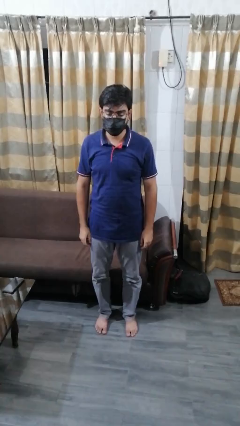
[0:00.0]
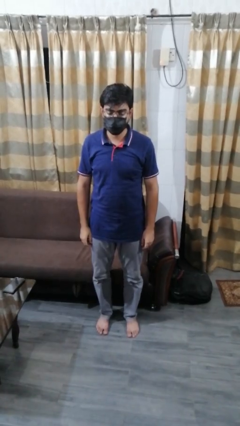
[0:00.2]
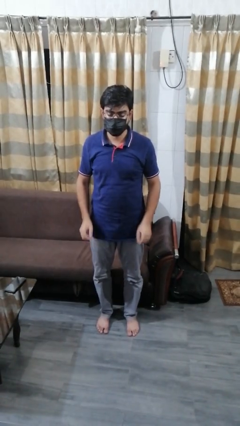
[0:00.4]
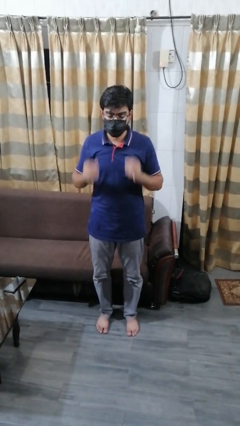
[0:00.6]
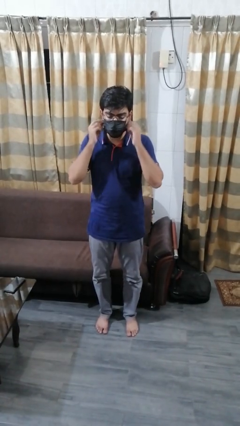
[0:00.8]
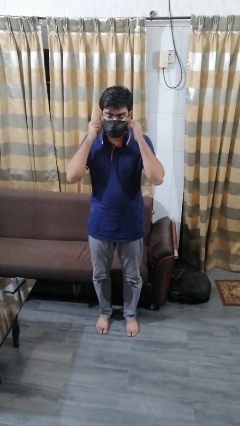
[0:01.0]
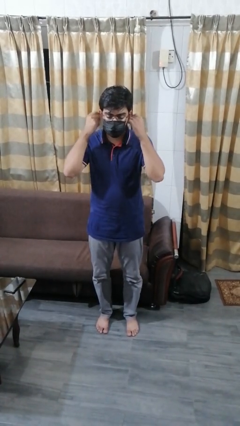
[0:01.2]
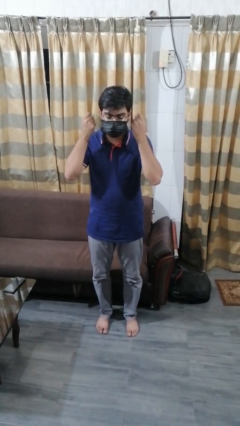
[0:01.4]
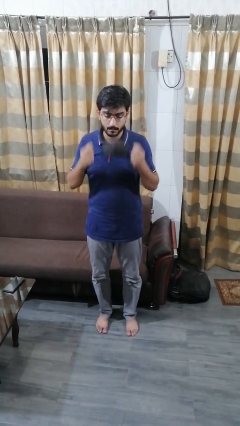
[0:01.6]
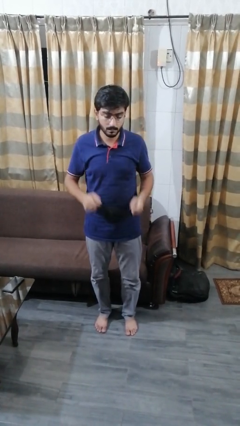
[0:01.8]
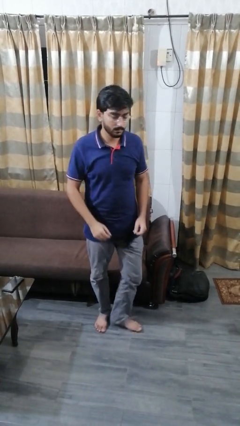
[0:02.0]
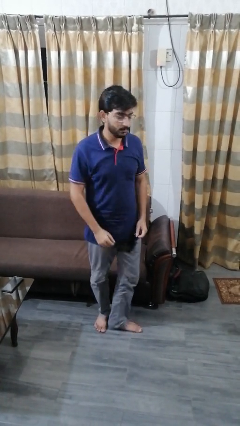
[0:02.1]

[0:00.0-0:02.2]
person takes off facemask

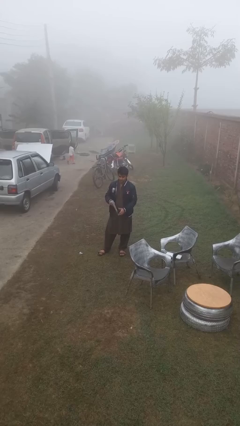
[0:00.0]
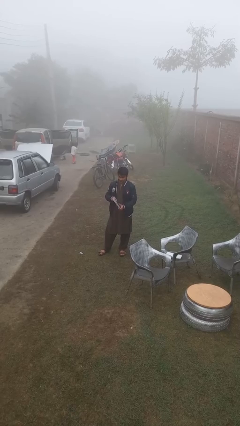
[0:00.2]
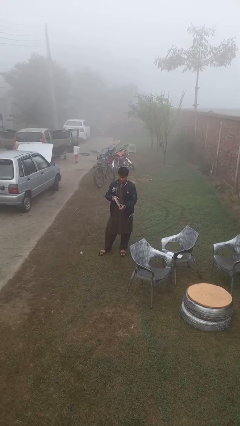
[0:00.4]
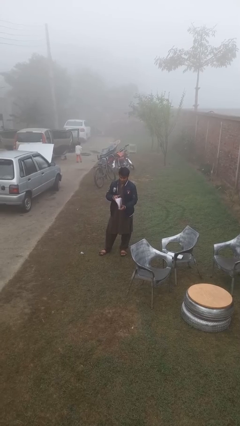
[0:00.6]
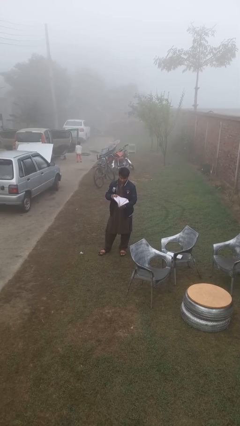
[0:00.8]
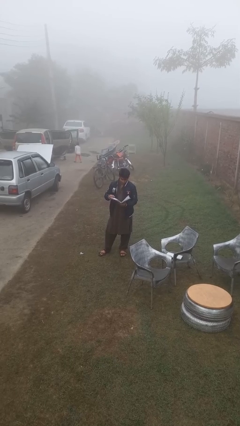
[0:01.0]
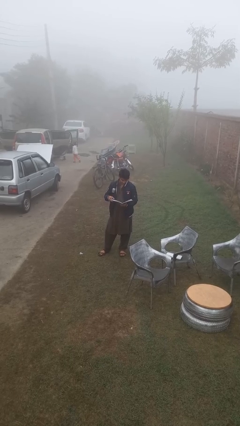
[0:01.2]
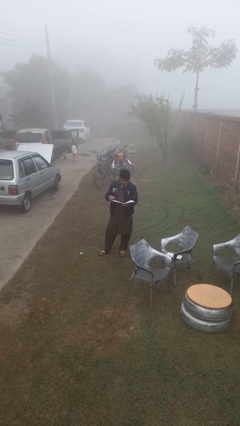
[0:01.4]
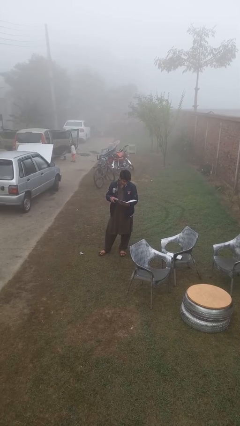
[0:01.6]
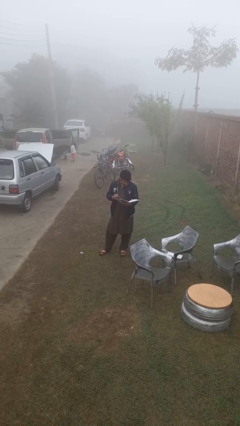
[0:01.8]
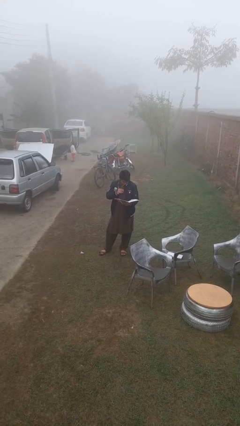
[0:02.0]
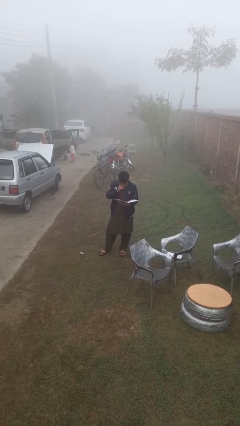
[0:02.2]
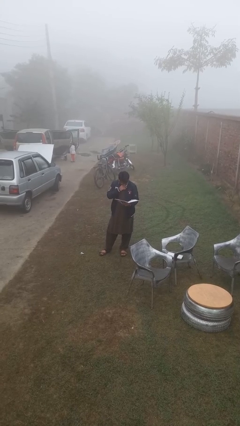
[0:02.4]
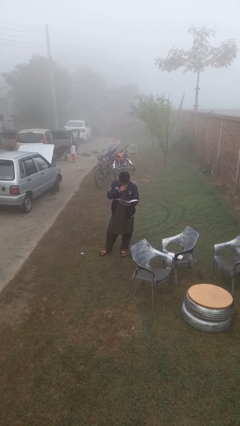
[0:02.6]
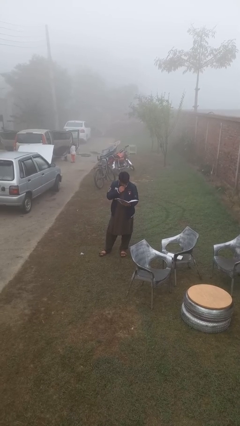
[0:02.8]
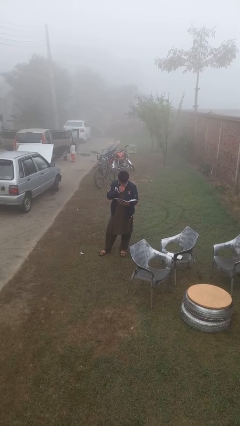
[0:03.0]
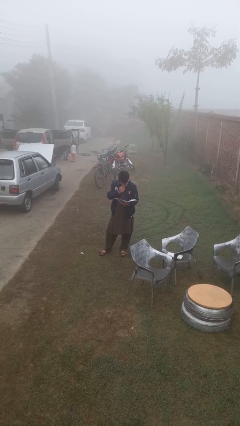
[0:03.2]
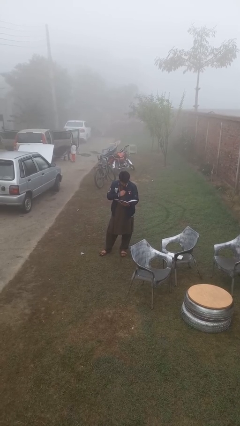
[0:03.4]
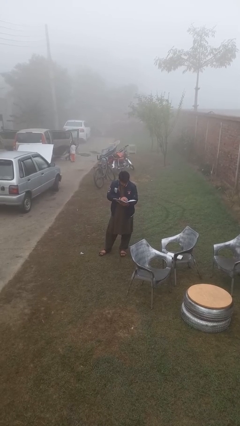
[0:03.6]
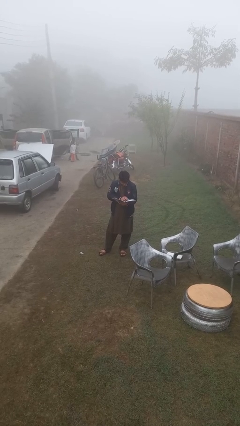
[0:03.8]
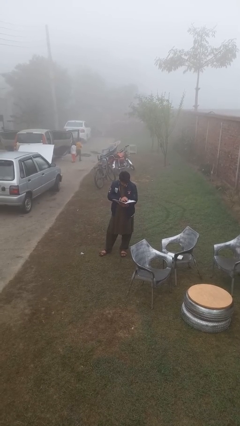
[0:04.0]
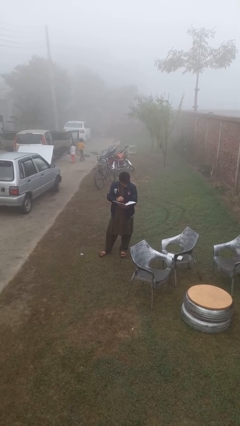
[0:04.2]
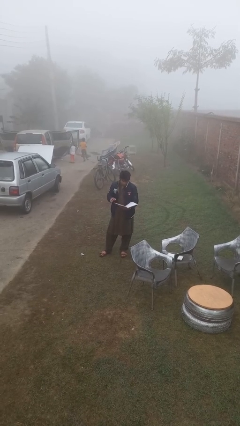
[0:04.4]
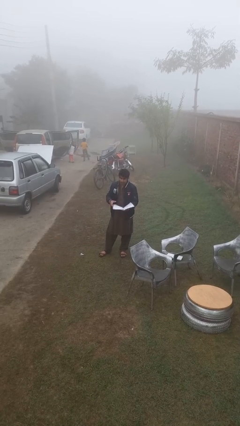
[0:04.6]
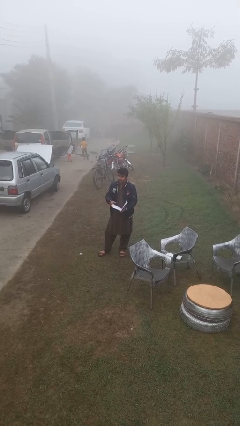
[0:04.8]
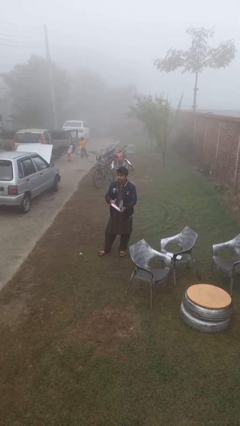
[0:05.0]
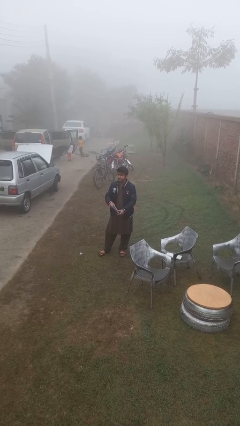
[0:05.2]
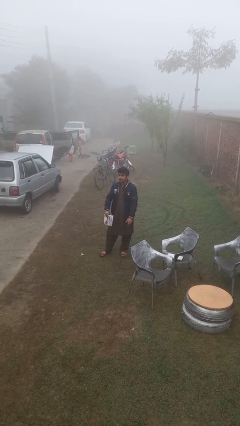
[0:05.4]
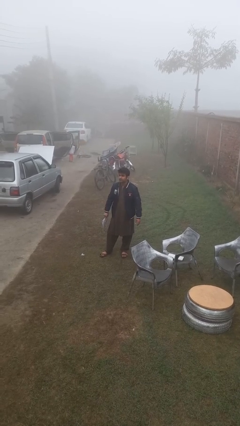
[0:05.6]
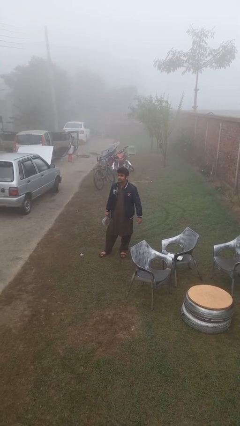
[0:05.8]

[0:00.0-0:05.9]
person reads document

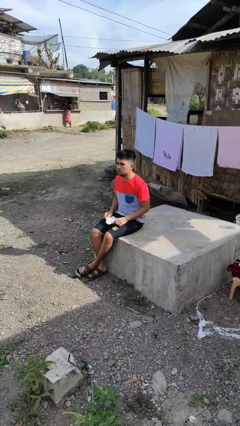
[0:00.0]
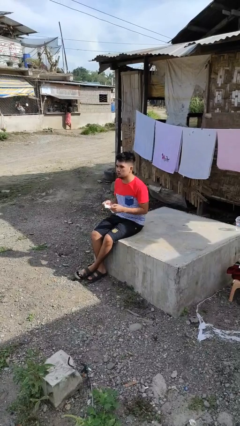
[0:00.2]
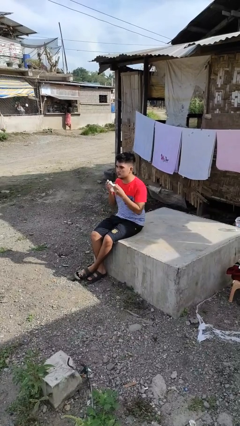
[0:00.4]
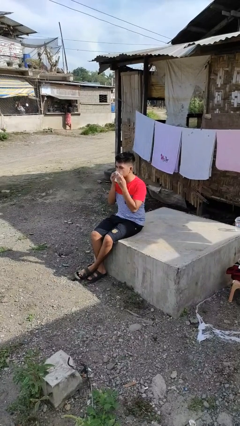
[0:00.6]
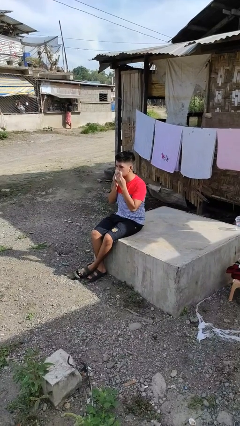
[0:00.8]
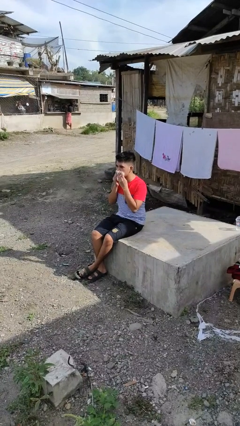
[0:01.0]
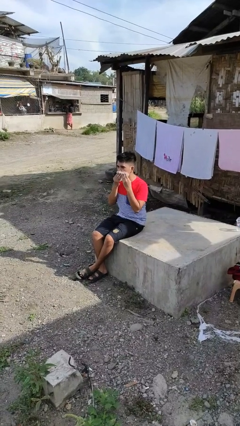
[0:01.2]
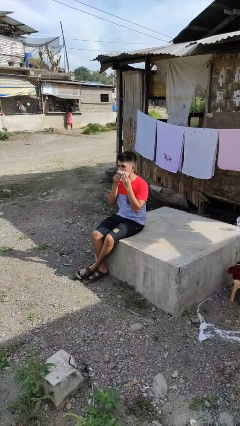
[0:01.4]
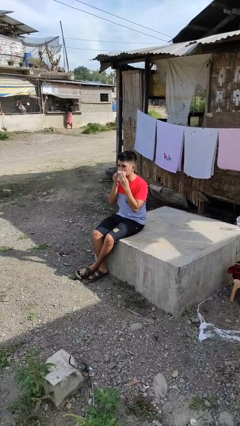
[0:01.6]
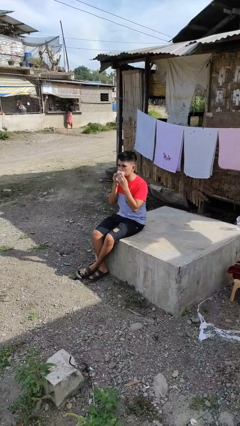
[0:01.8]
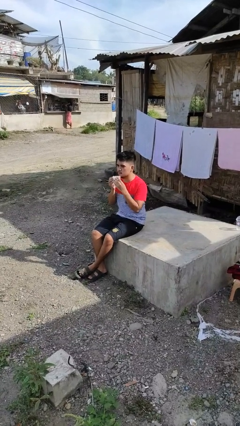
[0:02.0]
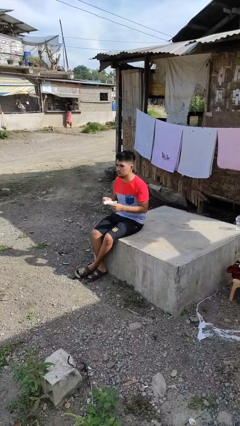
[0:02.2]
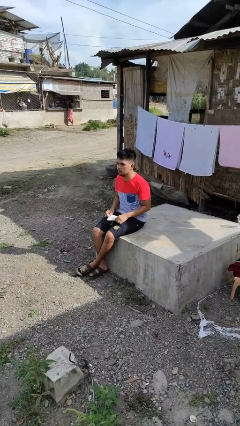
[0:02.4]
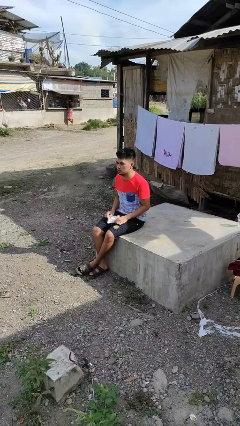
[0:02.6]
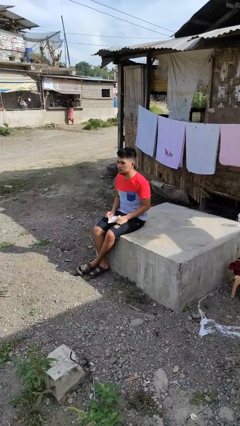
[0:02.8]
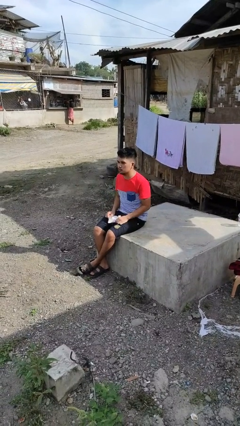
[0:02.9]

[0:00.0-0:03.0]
person wipes mouth with napkin

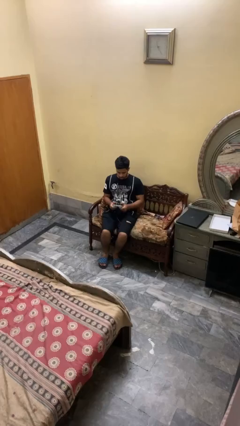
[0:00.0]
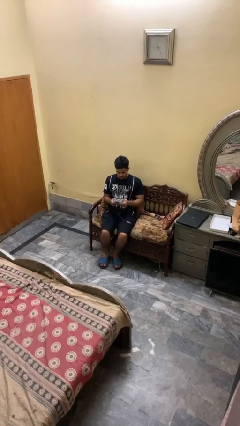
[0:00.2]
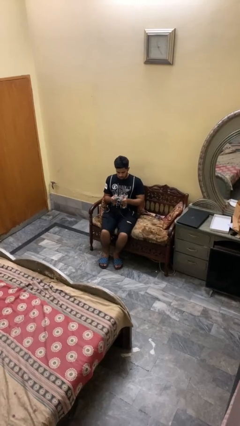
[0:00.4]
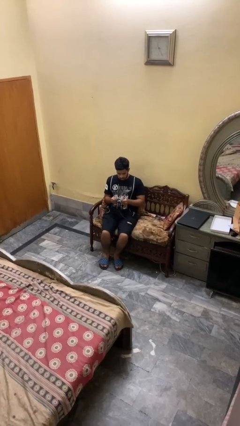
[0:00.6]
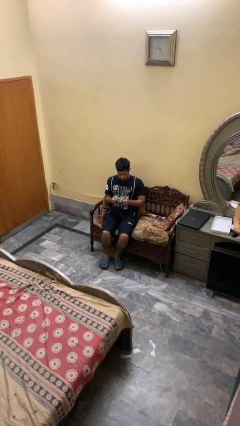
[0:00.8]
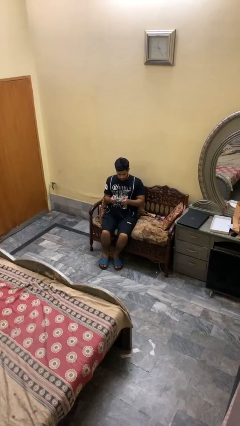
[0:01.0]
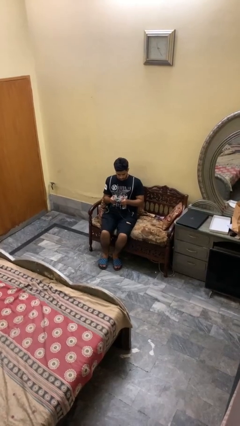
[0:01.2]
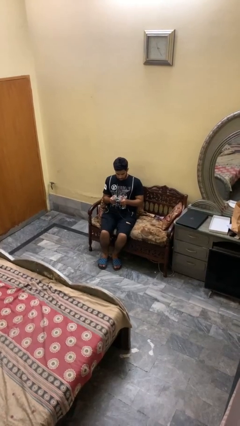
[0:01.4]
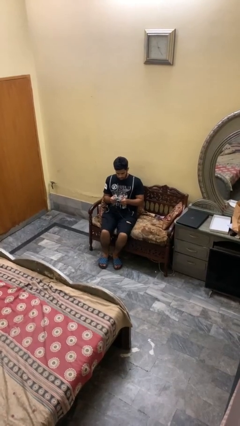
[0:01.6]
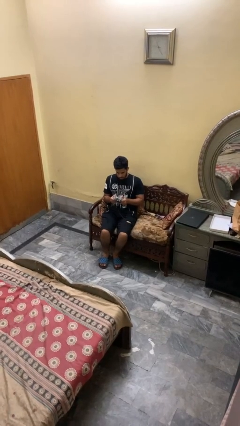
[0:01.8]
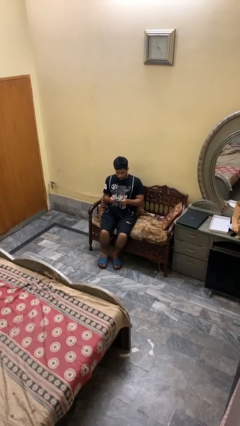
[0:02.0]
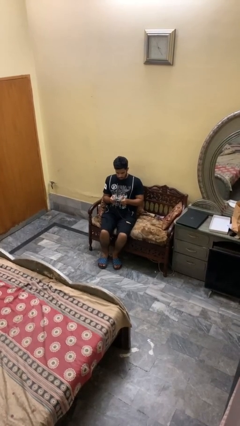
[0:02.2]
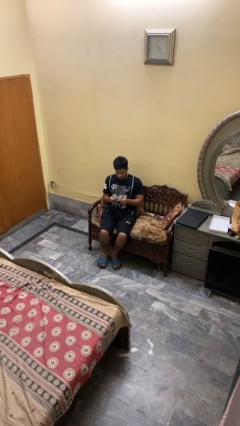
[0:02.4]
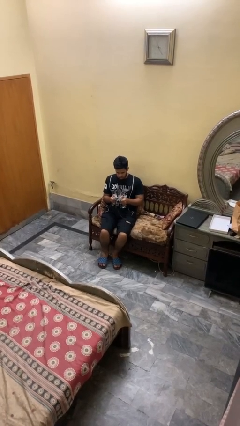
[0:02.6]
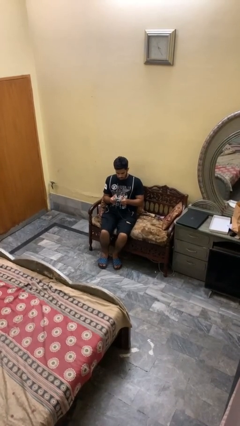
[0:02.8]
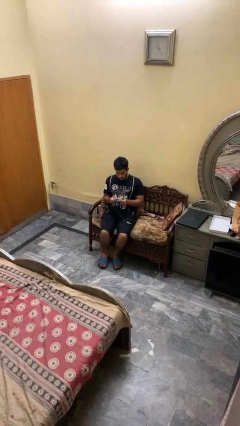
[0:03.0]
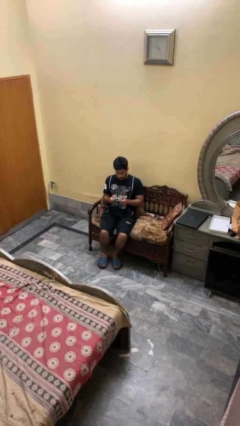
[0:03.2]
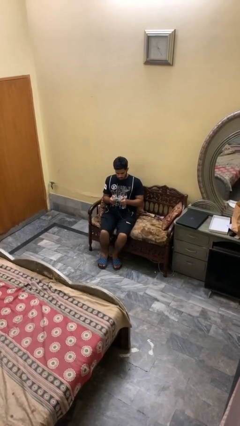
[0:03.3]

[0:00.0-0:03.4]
person interacts with handheld game

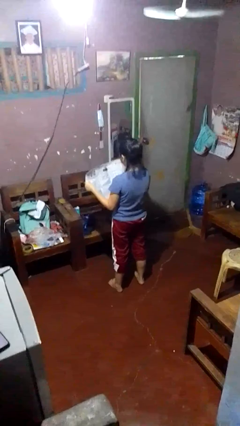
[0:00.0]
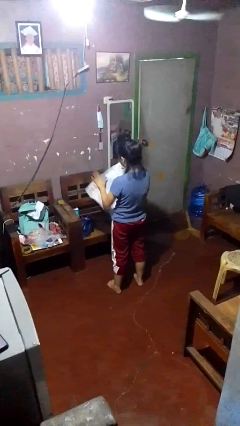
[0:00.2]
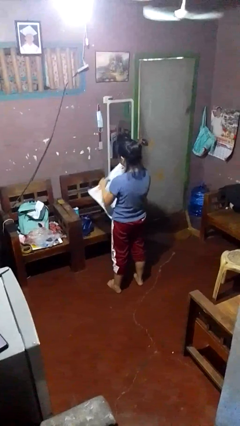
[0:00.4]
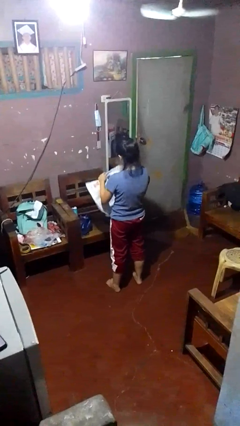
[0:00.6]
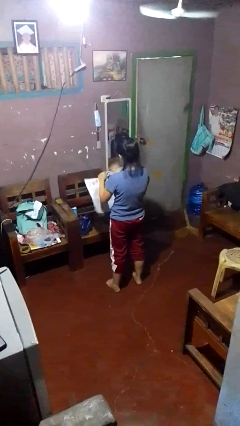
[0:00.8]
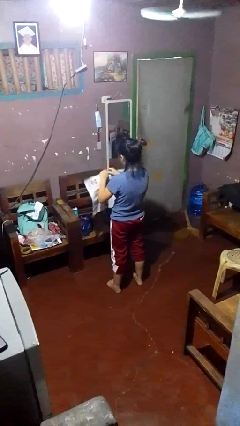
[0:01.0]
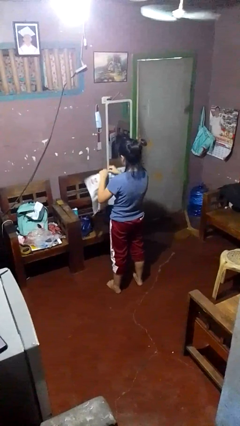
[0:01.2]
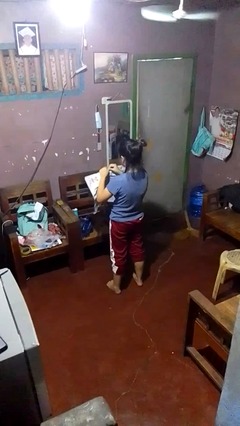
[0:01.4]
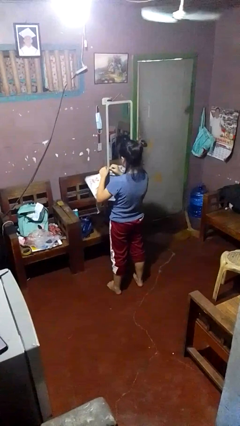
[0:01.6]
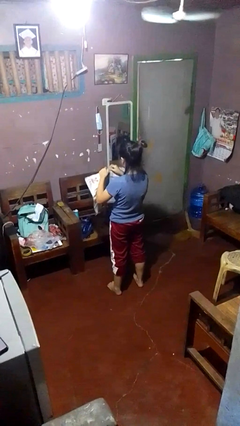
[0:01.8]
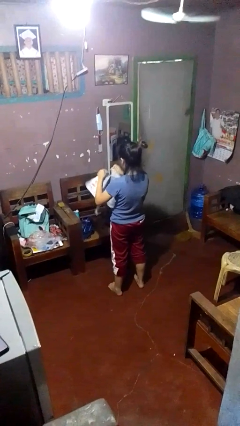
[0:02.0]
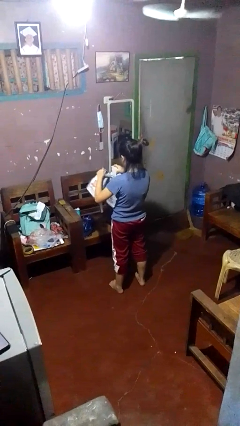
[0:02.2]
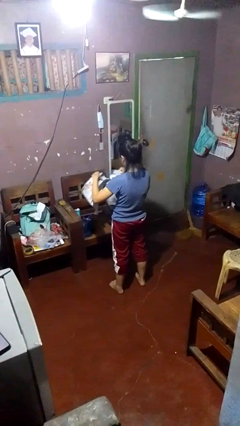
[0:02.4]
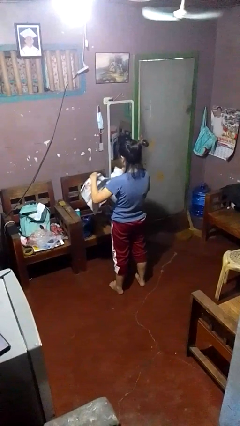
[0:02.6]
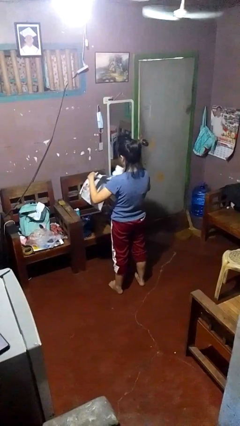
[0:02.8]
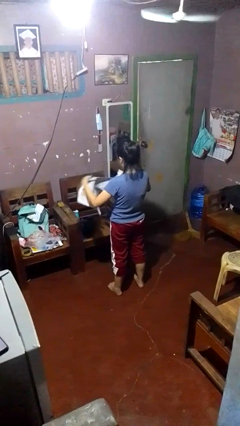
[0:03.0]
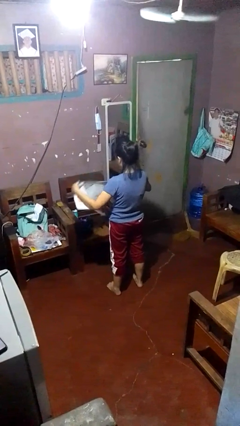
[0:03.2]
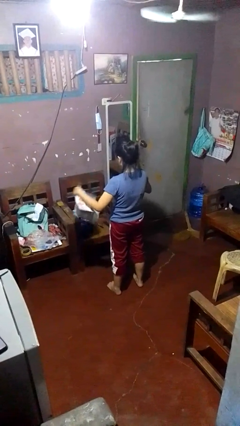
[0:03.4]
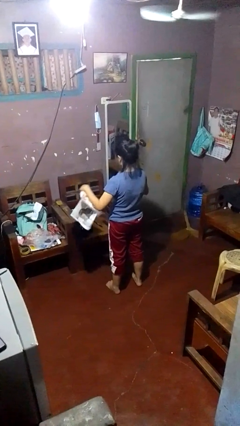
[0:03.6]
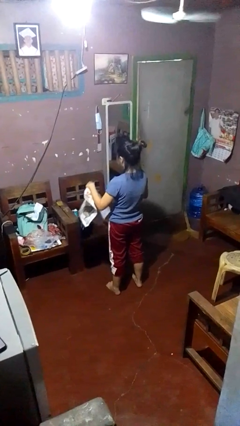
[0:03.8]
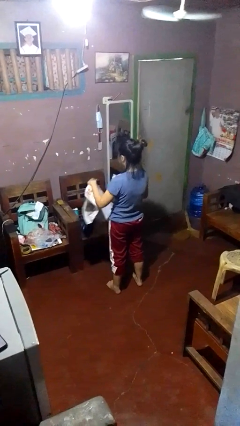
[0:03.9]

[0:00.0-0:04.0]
person tears paper
